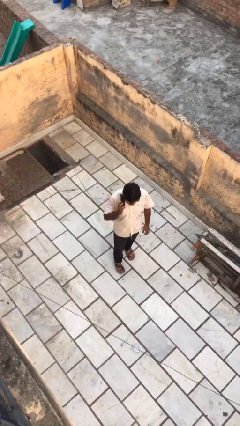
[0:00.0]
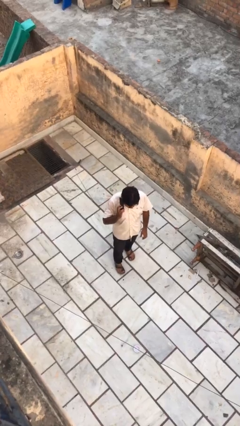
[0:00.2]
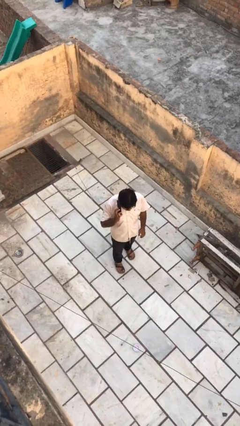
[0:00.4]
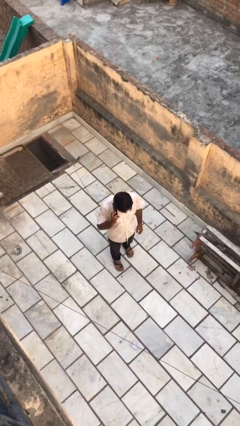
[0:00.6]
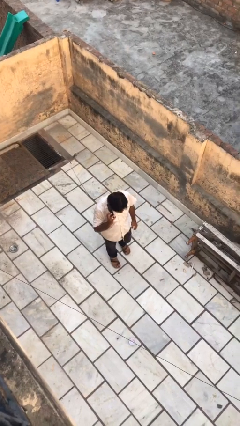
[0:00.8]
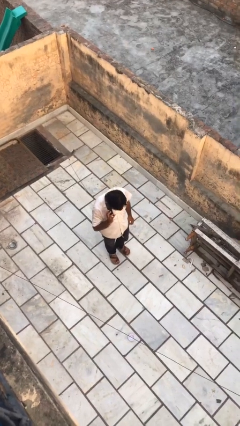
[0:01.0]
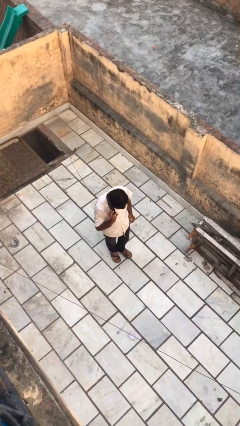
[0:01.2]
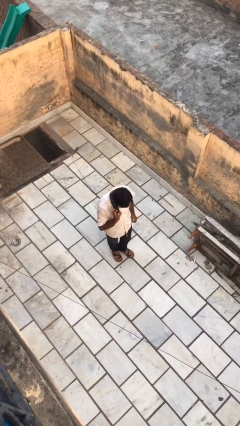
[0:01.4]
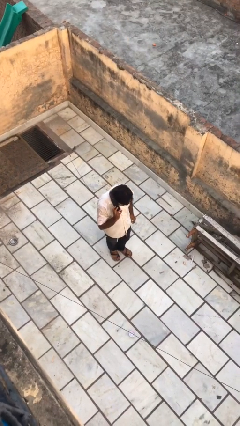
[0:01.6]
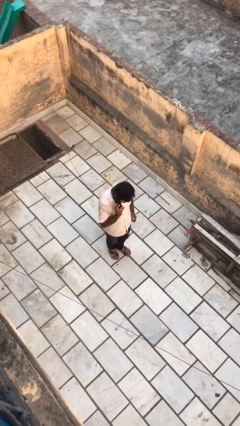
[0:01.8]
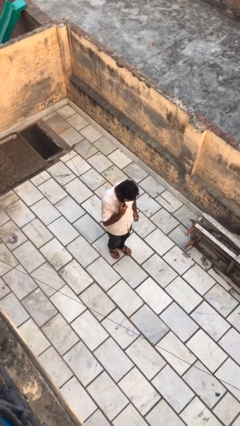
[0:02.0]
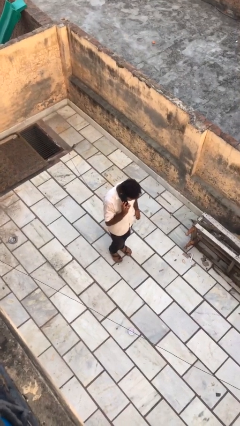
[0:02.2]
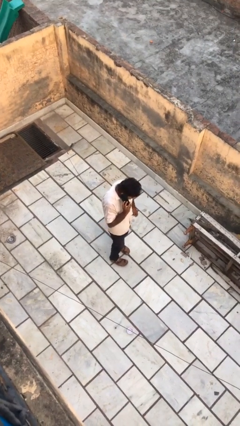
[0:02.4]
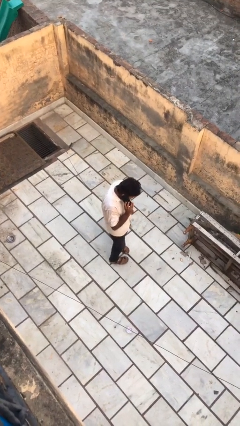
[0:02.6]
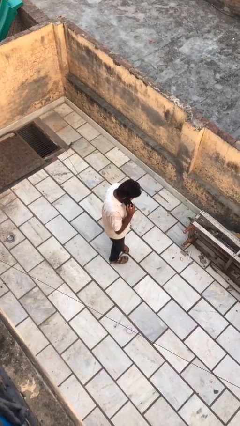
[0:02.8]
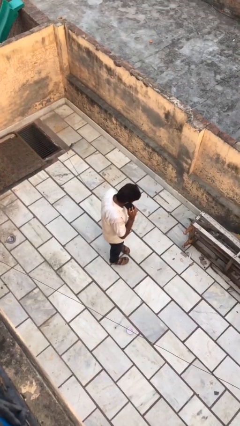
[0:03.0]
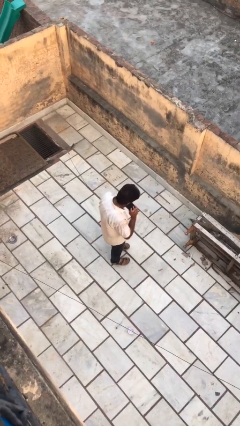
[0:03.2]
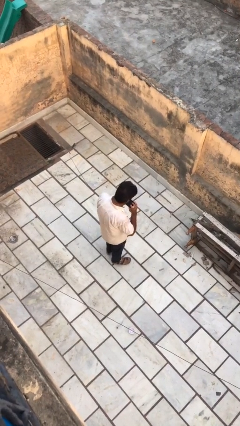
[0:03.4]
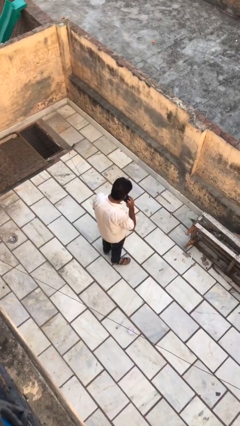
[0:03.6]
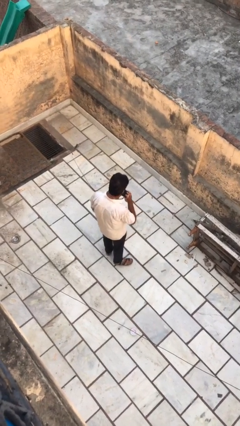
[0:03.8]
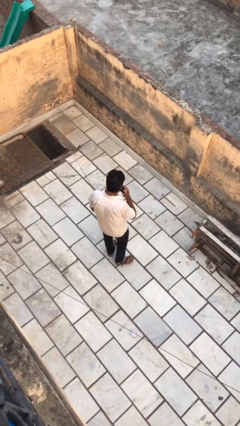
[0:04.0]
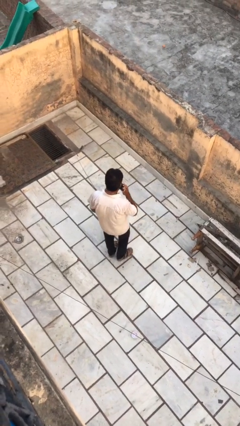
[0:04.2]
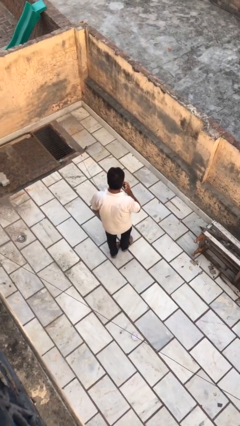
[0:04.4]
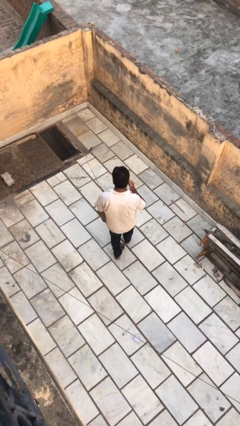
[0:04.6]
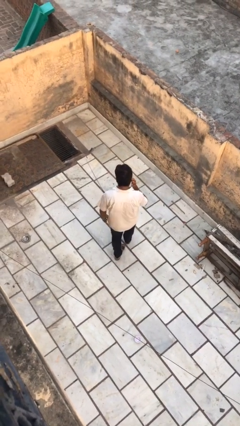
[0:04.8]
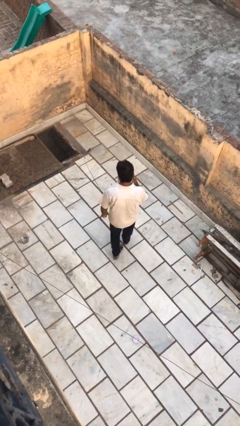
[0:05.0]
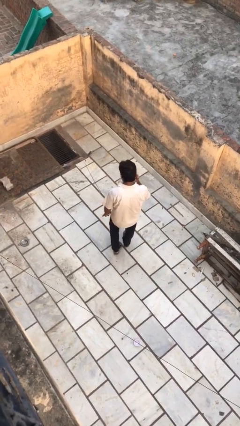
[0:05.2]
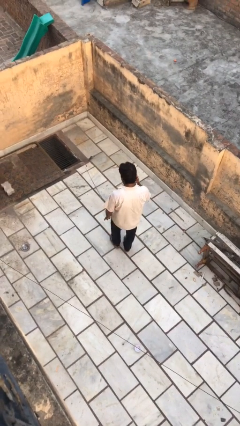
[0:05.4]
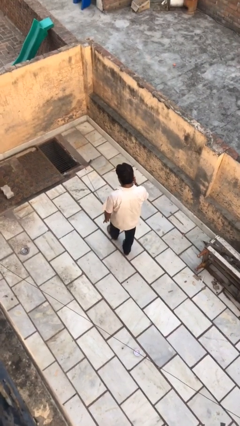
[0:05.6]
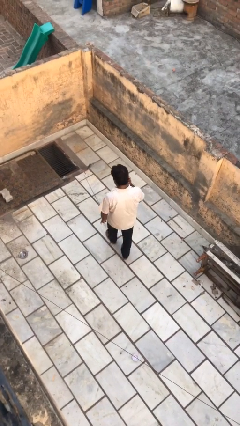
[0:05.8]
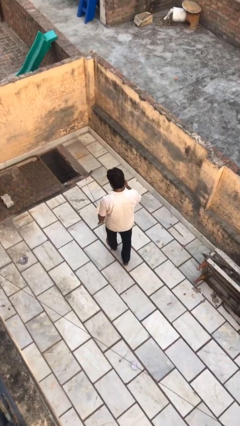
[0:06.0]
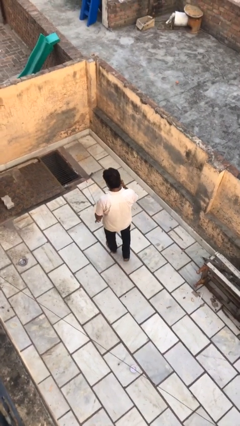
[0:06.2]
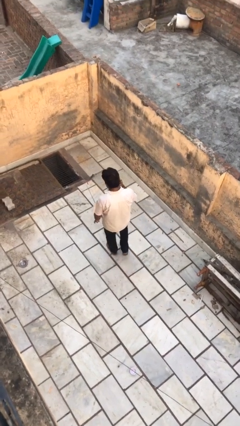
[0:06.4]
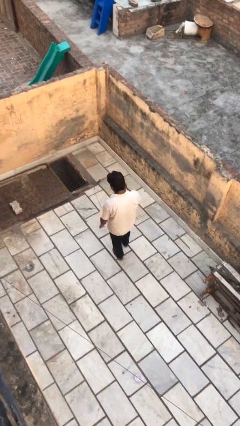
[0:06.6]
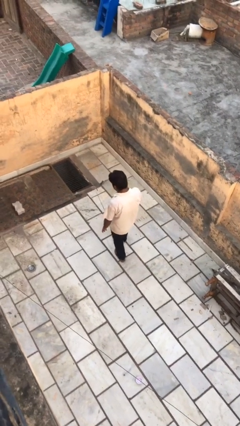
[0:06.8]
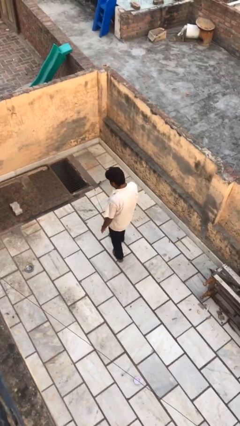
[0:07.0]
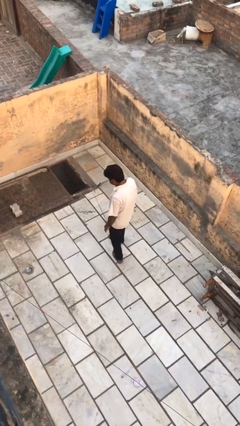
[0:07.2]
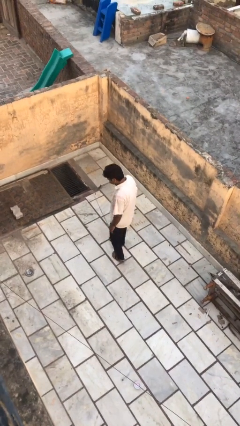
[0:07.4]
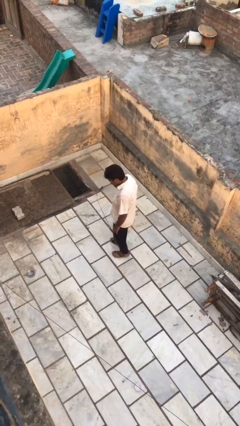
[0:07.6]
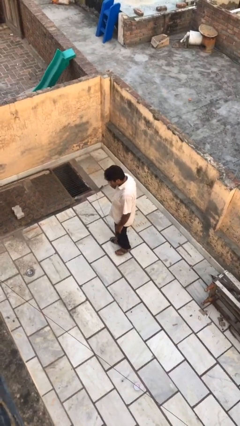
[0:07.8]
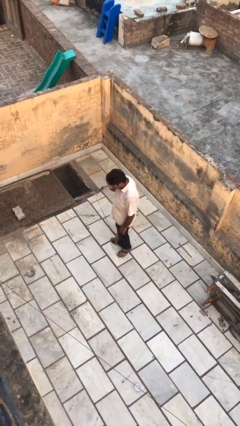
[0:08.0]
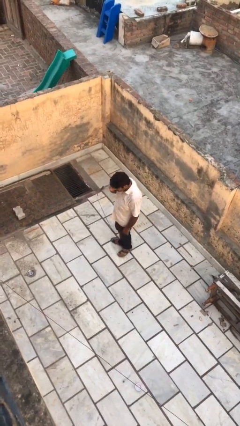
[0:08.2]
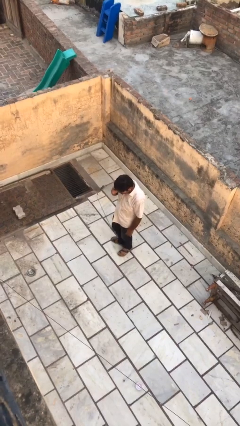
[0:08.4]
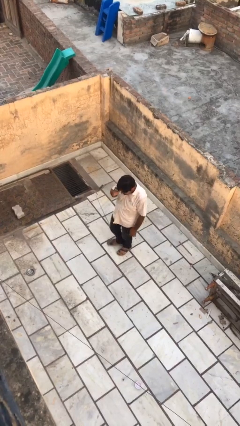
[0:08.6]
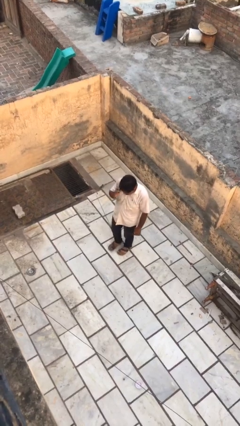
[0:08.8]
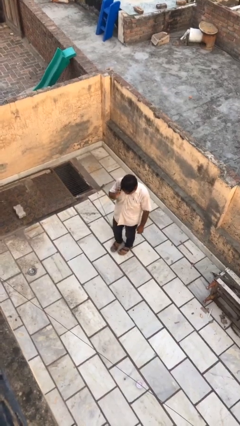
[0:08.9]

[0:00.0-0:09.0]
person talks on phone

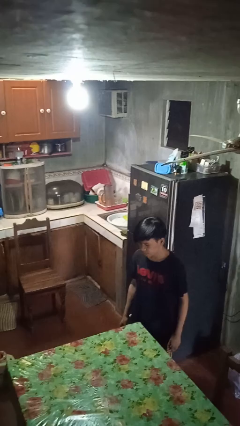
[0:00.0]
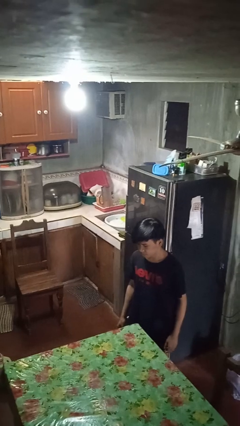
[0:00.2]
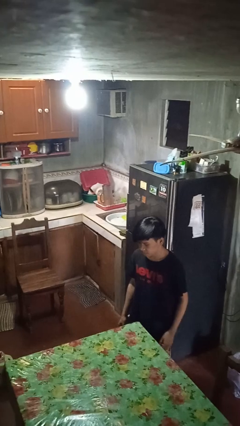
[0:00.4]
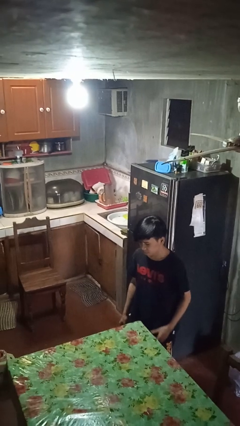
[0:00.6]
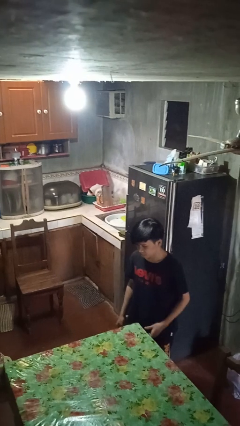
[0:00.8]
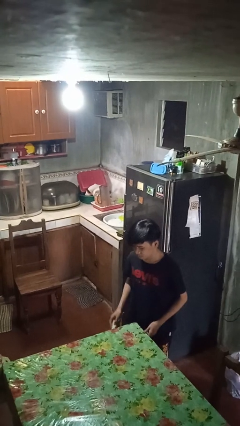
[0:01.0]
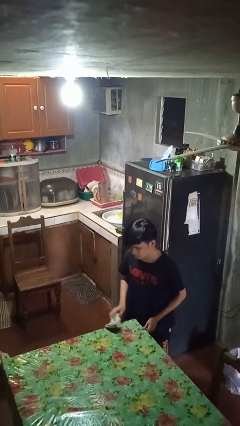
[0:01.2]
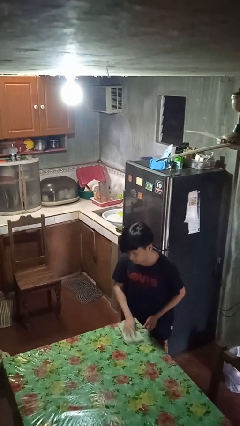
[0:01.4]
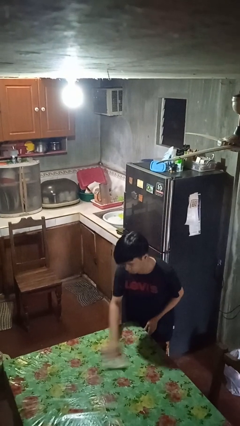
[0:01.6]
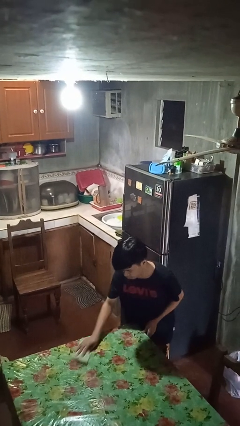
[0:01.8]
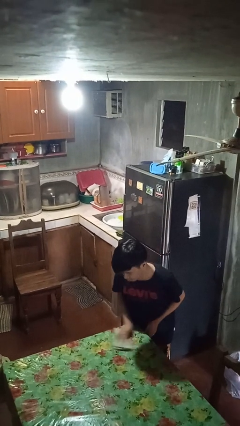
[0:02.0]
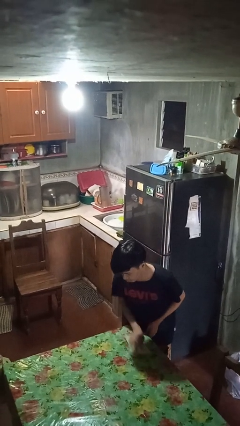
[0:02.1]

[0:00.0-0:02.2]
person cleans table with rag

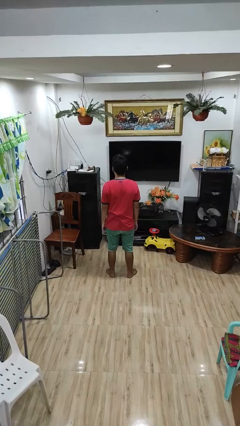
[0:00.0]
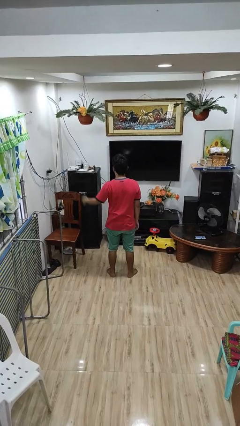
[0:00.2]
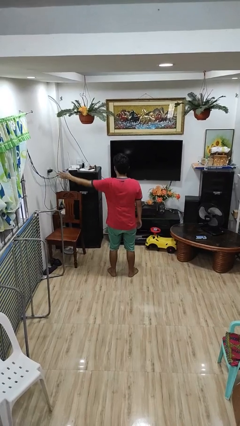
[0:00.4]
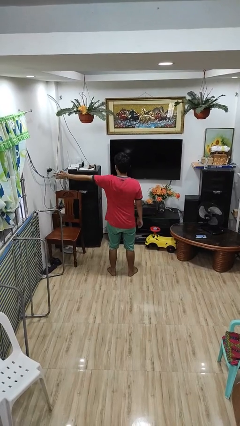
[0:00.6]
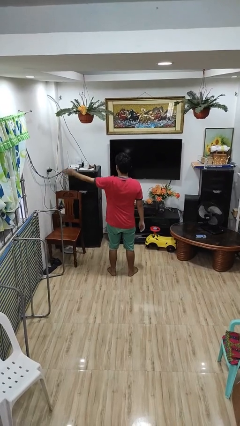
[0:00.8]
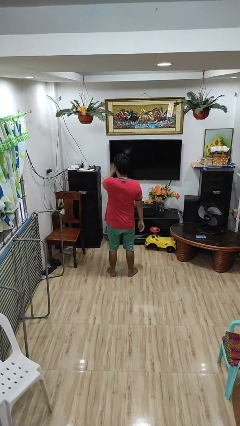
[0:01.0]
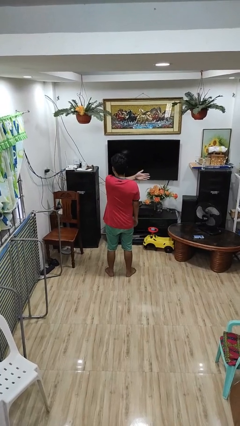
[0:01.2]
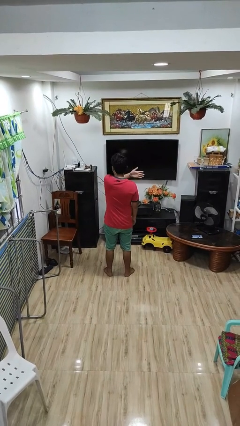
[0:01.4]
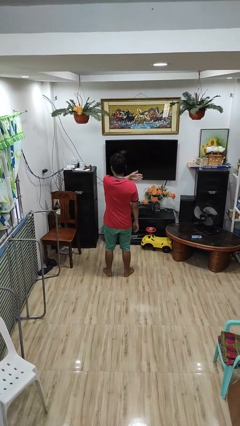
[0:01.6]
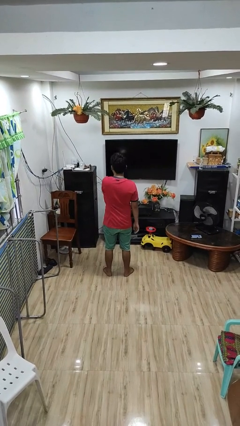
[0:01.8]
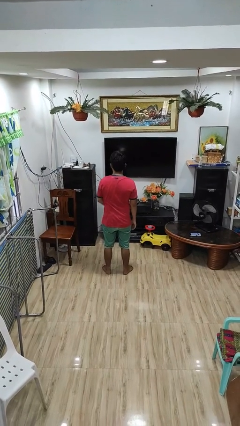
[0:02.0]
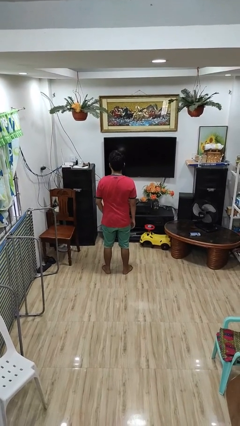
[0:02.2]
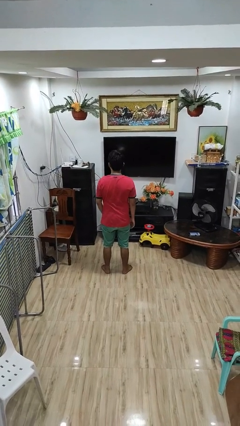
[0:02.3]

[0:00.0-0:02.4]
person gestures swipe right

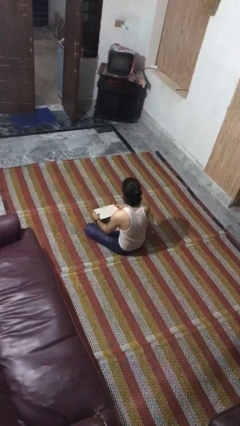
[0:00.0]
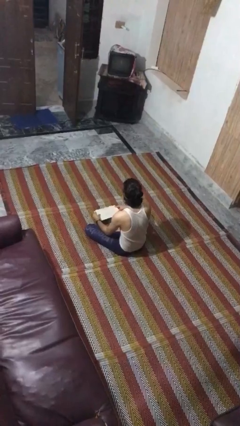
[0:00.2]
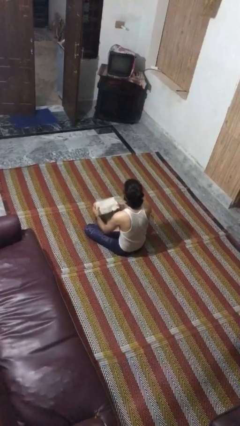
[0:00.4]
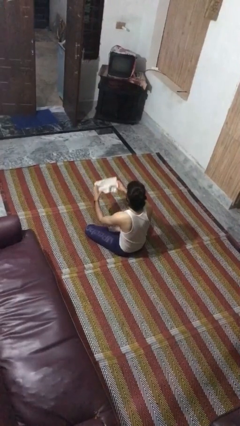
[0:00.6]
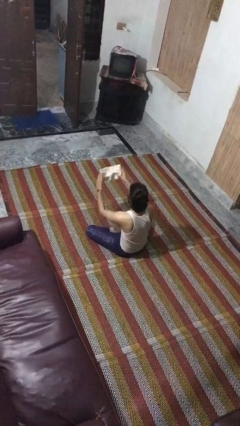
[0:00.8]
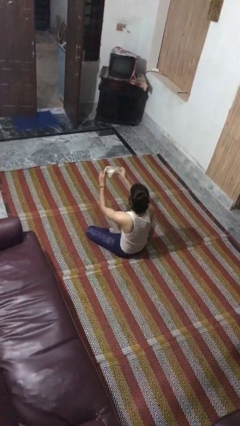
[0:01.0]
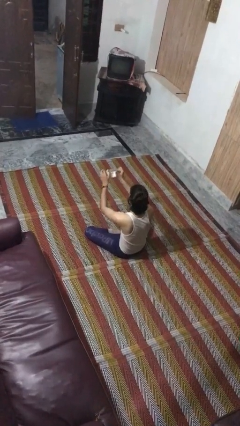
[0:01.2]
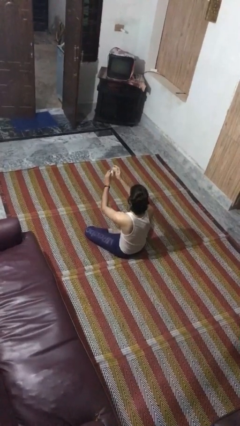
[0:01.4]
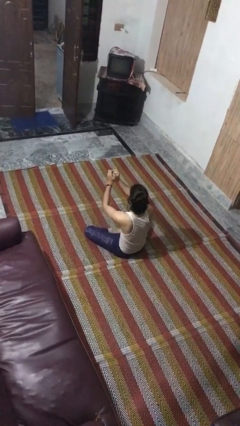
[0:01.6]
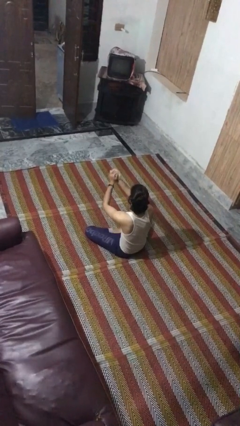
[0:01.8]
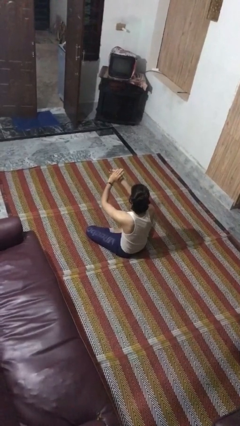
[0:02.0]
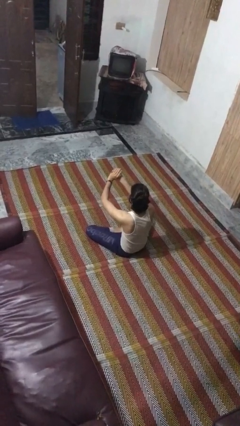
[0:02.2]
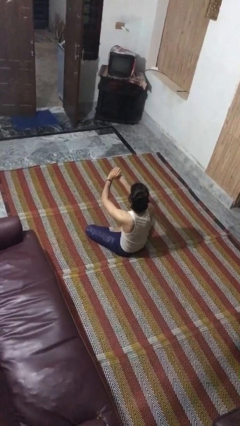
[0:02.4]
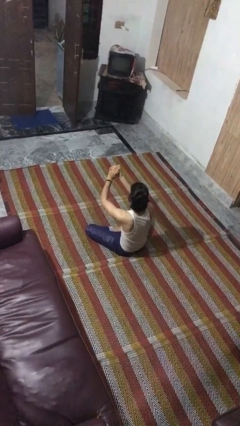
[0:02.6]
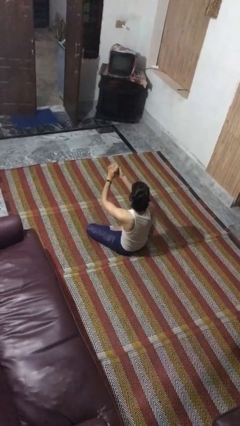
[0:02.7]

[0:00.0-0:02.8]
person crumples paper

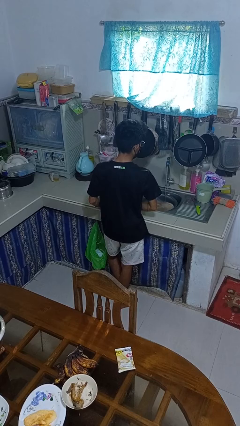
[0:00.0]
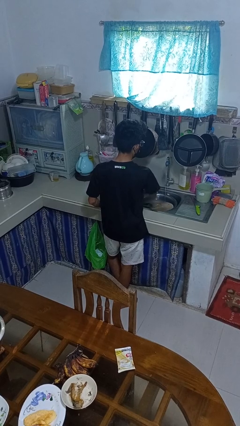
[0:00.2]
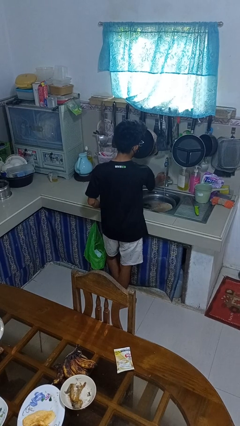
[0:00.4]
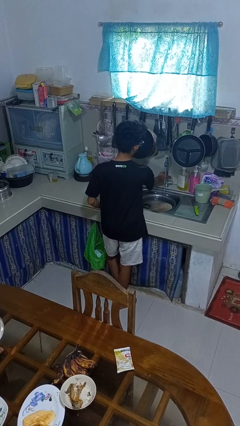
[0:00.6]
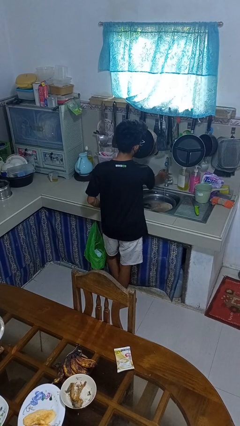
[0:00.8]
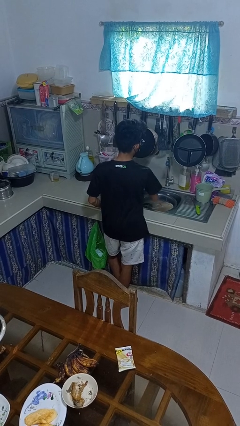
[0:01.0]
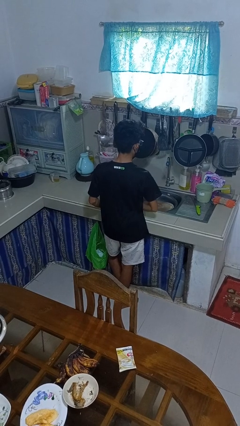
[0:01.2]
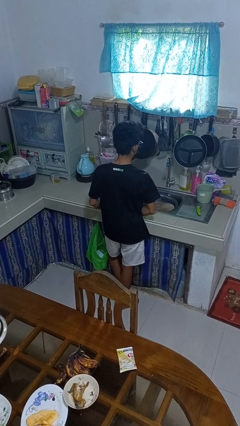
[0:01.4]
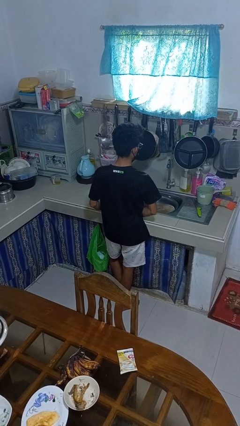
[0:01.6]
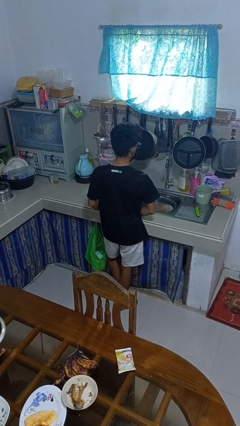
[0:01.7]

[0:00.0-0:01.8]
person turns off faucet
